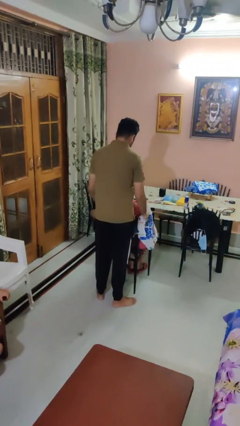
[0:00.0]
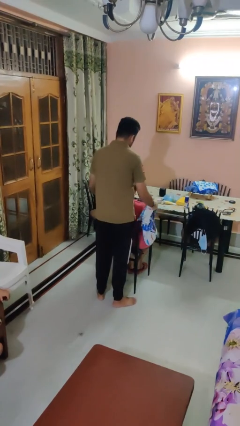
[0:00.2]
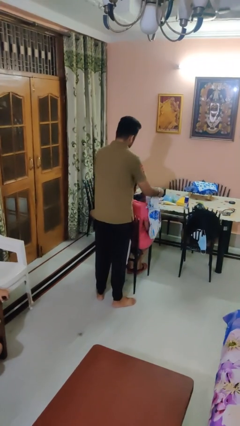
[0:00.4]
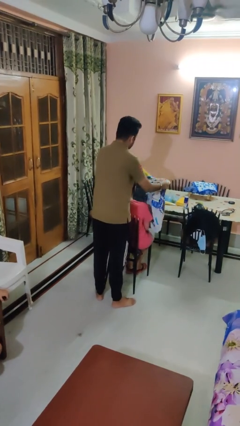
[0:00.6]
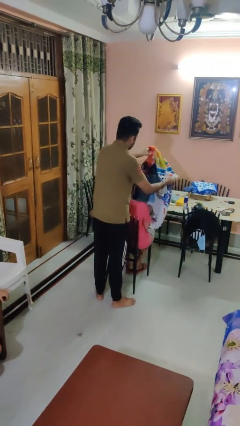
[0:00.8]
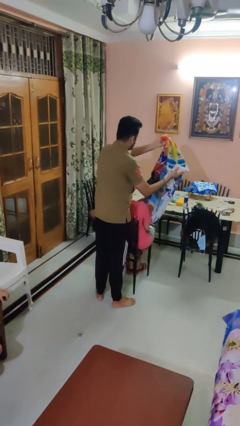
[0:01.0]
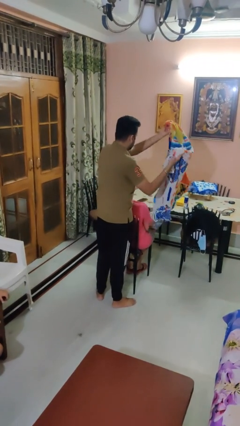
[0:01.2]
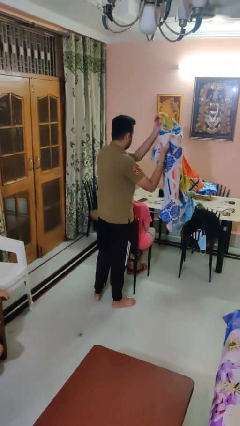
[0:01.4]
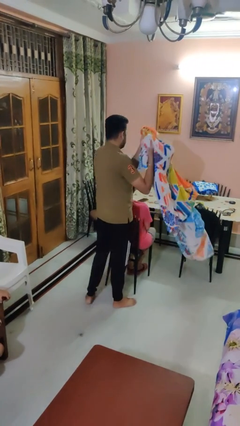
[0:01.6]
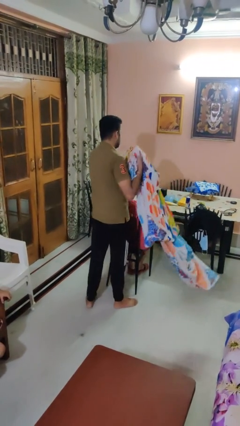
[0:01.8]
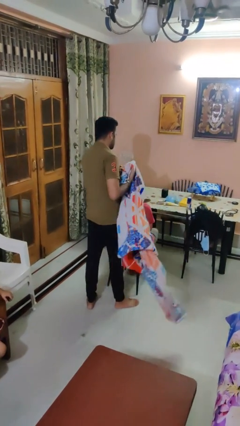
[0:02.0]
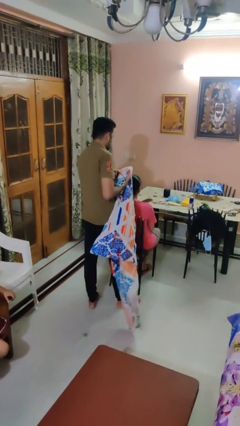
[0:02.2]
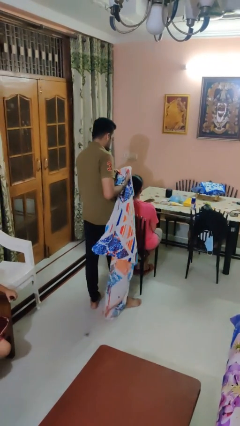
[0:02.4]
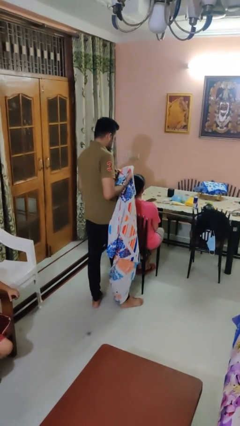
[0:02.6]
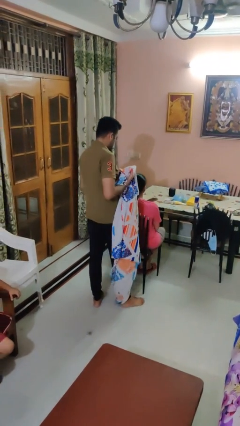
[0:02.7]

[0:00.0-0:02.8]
person uncovers friend with blanket

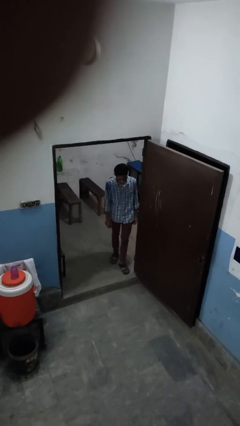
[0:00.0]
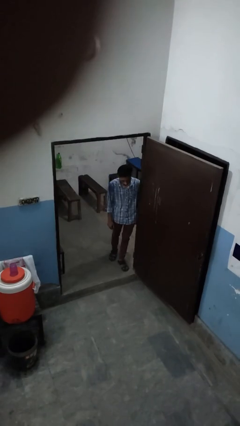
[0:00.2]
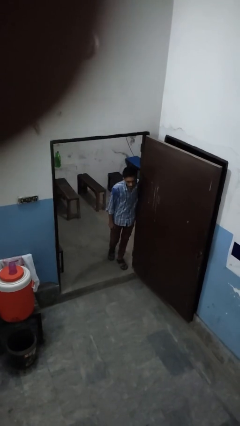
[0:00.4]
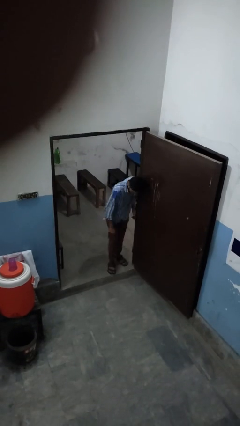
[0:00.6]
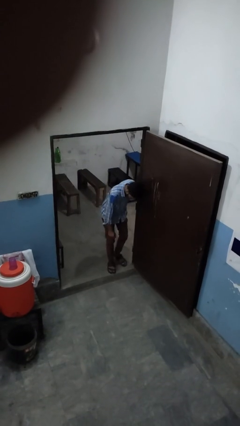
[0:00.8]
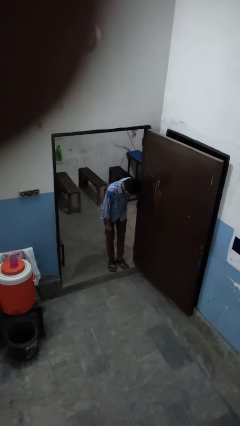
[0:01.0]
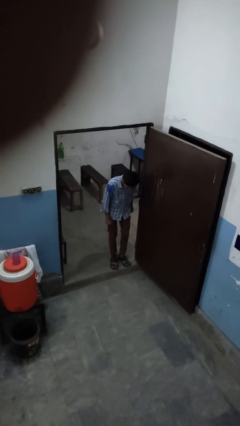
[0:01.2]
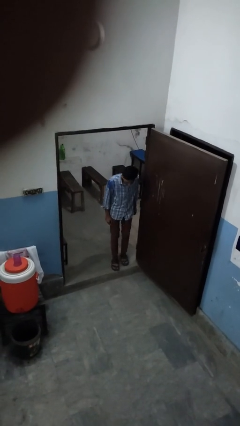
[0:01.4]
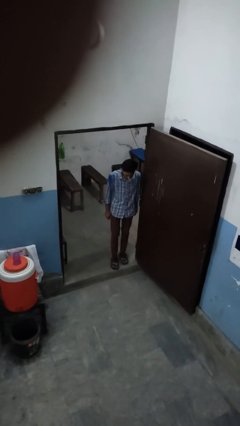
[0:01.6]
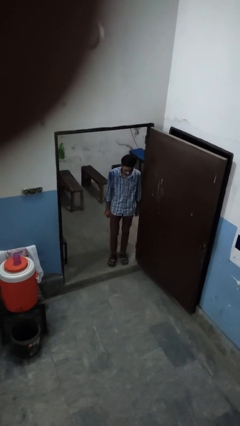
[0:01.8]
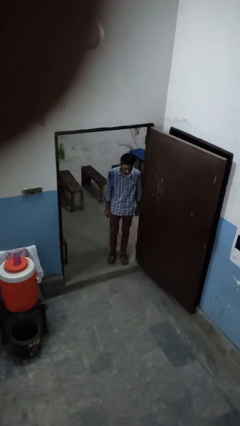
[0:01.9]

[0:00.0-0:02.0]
person bumps into wall

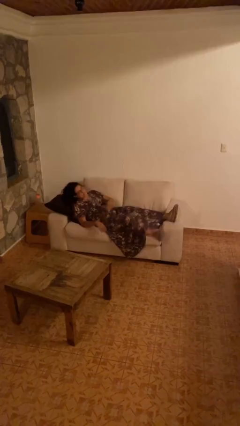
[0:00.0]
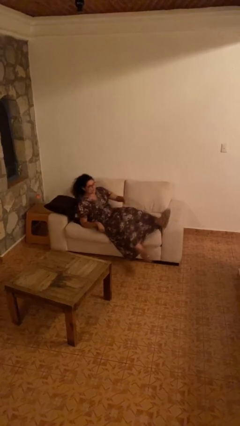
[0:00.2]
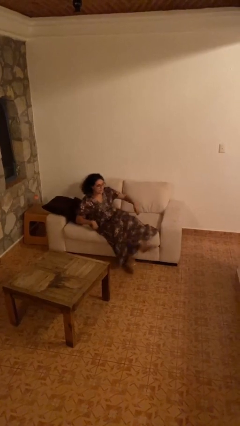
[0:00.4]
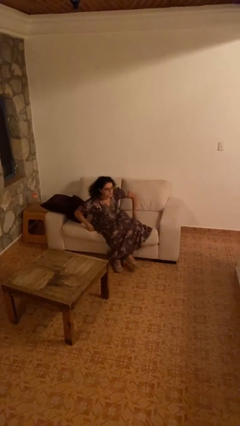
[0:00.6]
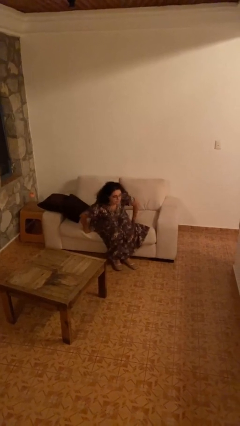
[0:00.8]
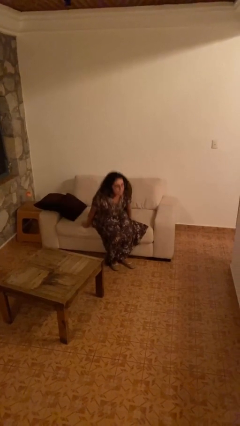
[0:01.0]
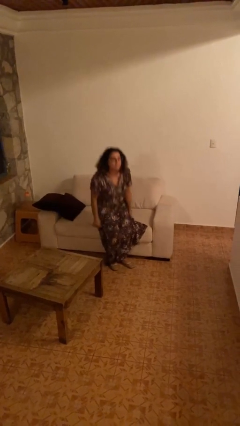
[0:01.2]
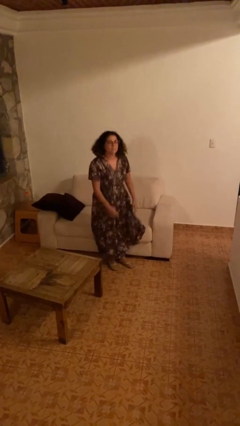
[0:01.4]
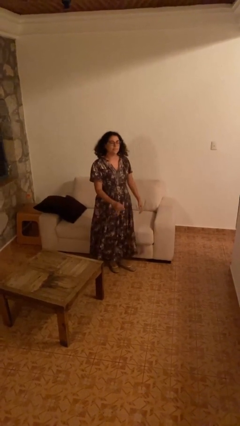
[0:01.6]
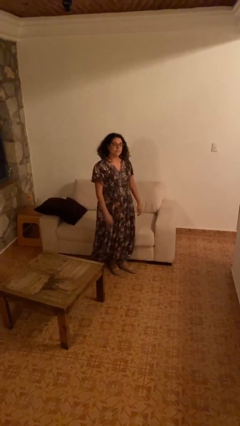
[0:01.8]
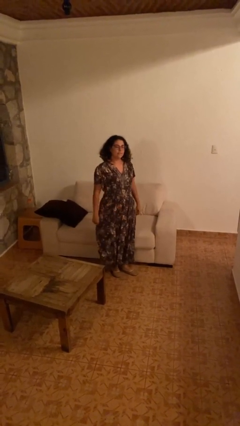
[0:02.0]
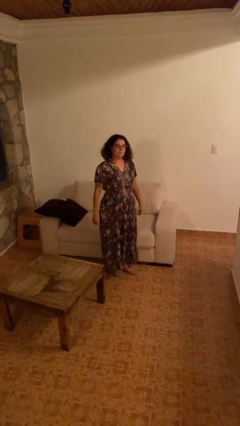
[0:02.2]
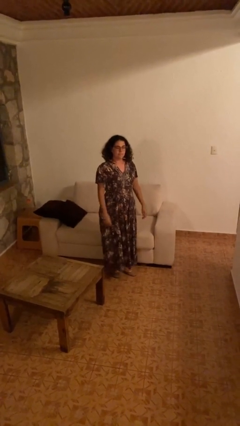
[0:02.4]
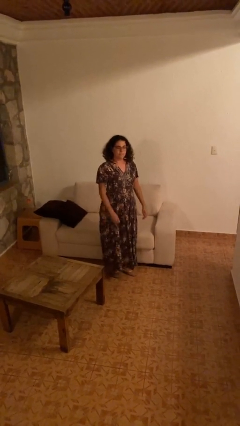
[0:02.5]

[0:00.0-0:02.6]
person stands up

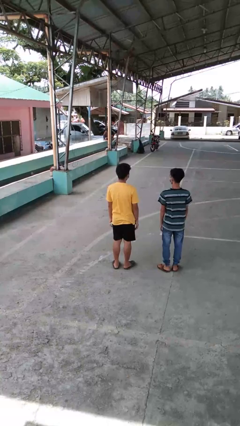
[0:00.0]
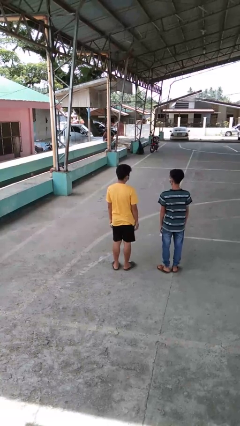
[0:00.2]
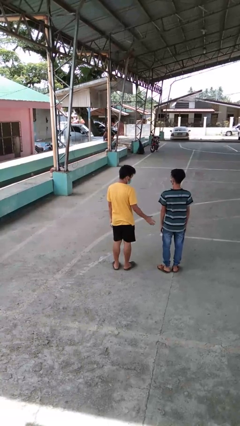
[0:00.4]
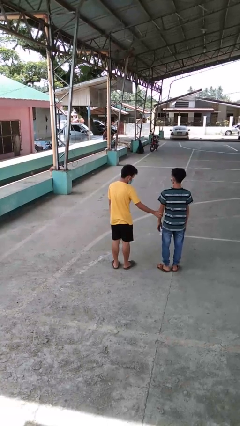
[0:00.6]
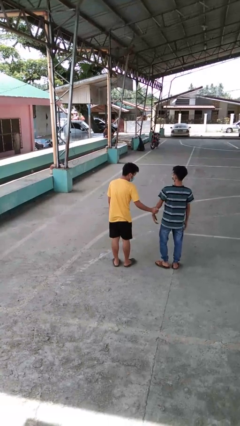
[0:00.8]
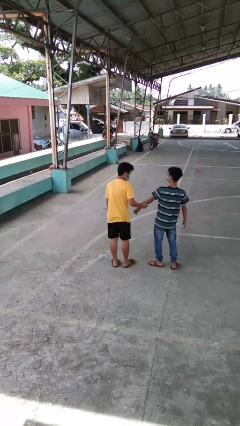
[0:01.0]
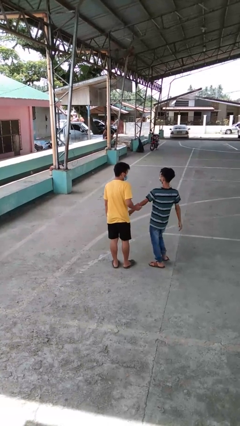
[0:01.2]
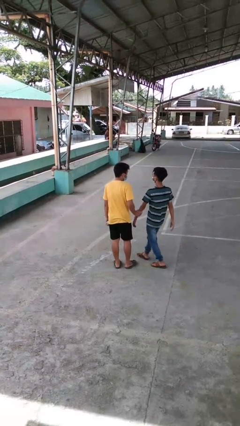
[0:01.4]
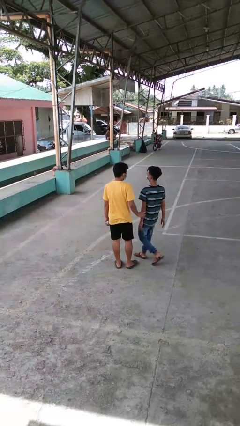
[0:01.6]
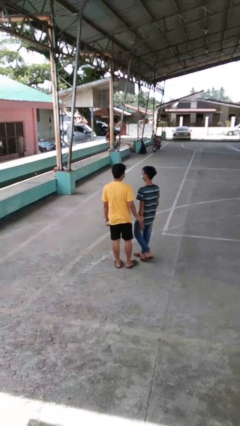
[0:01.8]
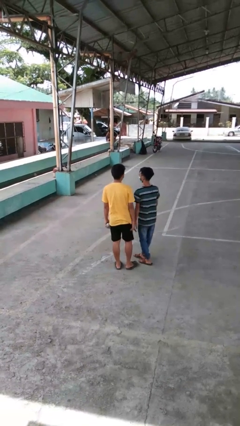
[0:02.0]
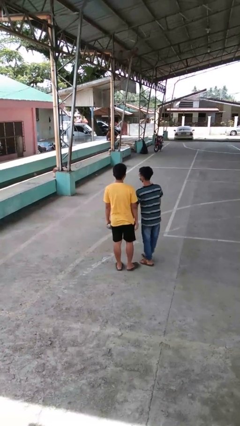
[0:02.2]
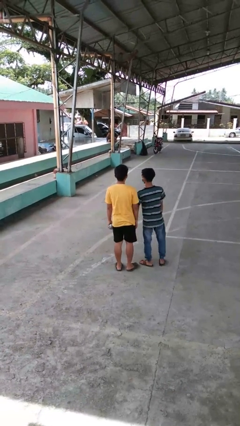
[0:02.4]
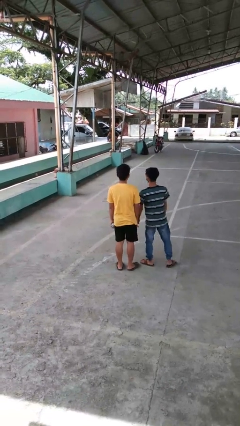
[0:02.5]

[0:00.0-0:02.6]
person grabs person by forearm

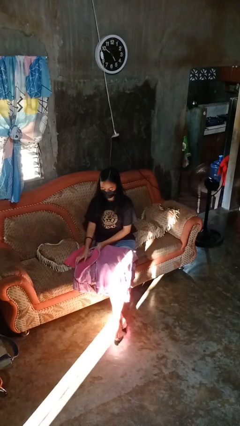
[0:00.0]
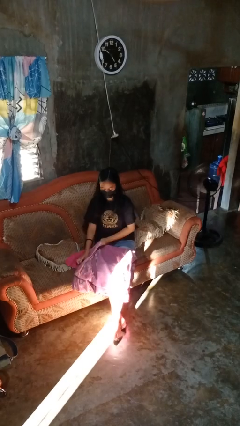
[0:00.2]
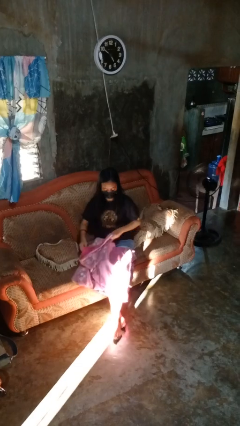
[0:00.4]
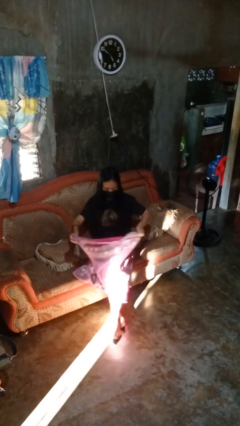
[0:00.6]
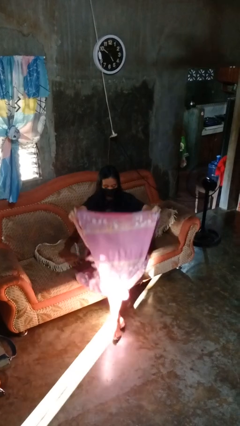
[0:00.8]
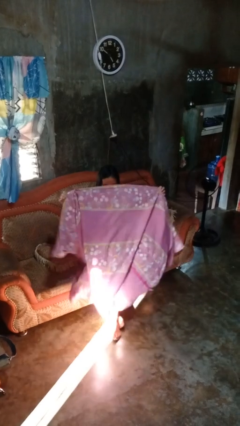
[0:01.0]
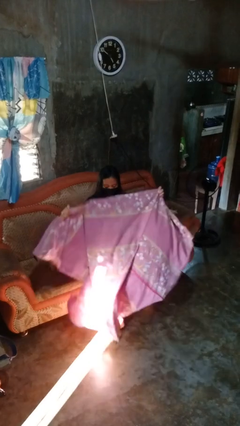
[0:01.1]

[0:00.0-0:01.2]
person unfolds blanket

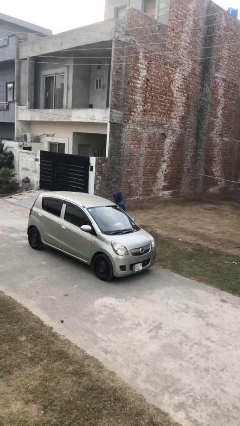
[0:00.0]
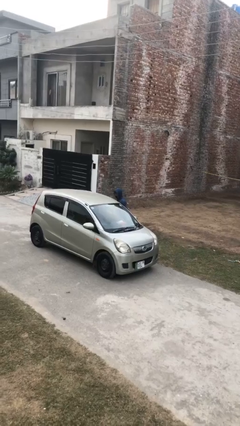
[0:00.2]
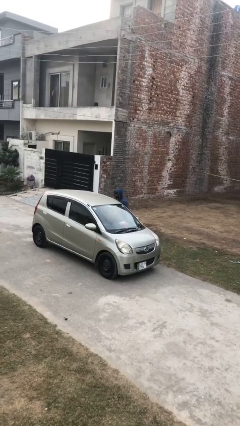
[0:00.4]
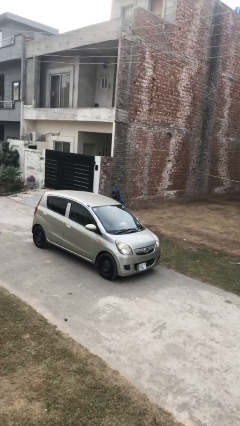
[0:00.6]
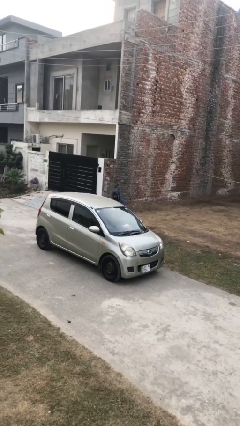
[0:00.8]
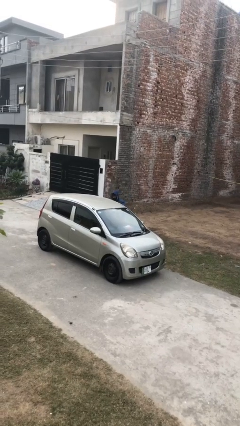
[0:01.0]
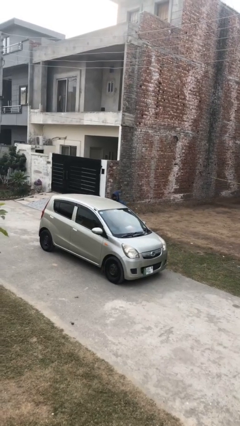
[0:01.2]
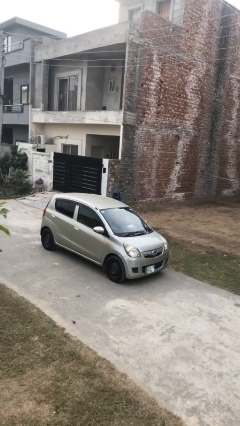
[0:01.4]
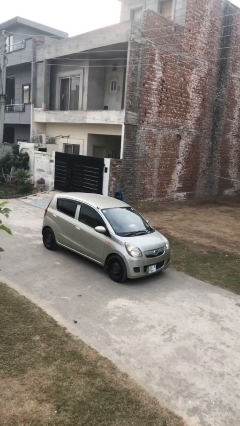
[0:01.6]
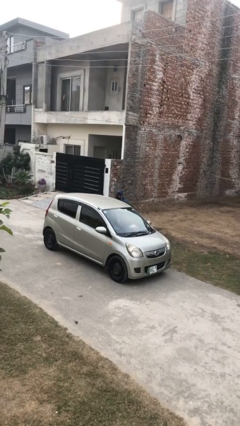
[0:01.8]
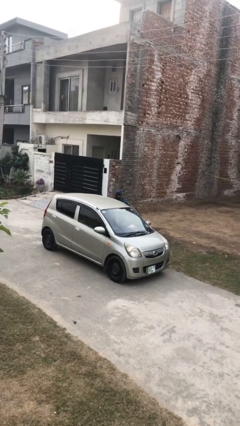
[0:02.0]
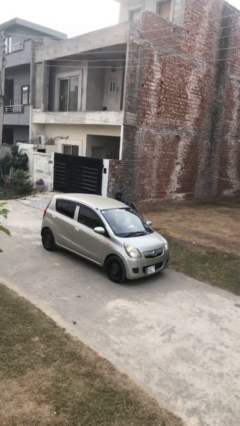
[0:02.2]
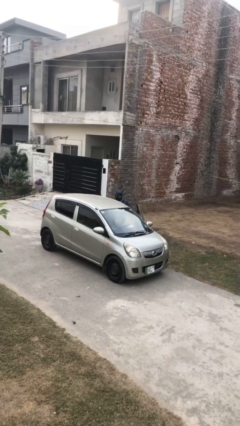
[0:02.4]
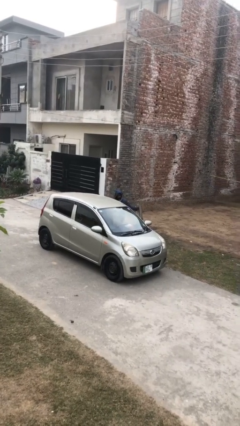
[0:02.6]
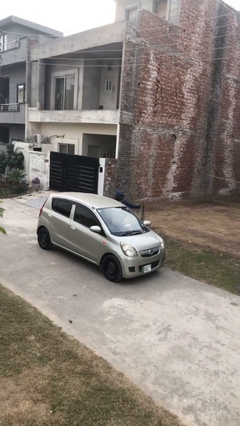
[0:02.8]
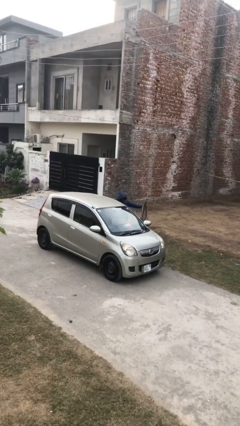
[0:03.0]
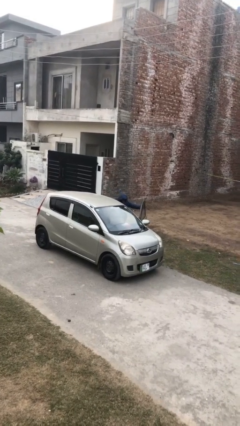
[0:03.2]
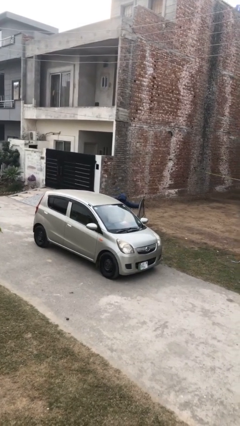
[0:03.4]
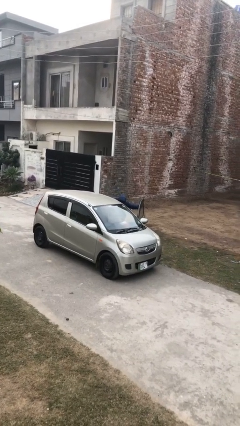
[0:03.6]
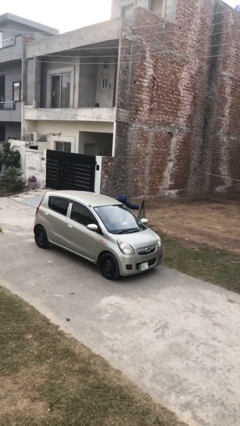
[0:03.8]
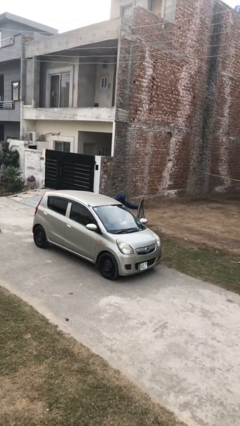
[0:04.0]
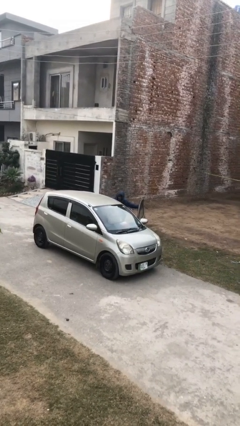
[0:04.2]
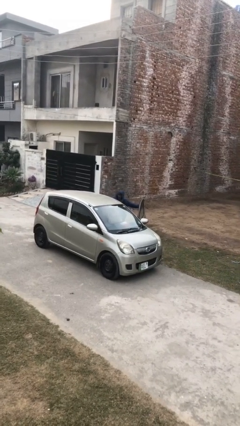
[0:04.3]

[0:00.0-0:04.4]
person opens car door

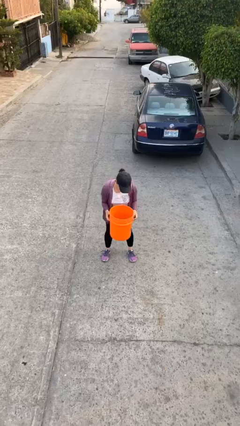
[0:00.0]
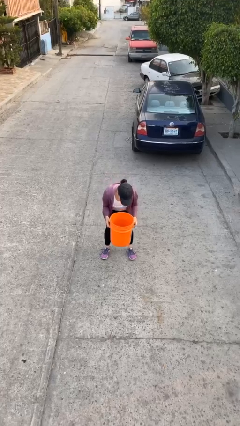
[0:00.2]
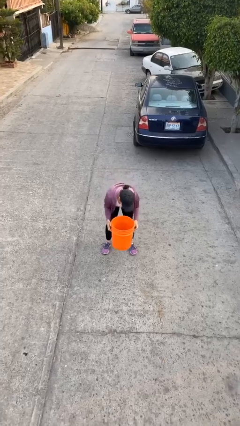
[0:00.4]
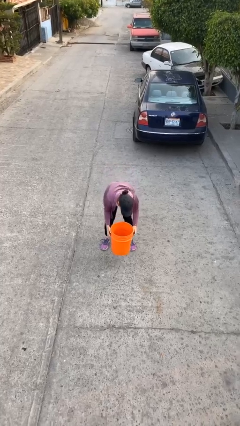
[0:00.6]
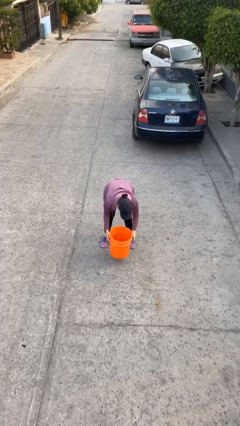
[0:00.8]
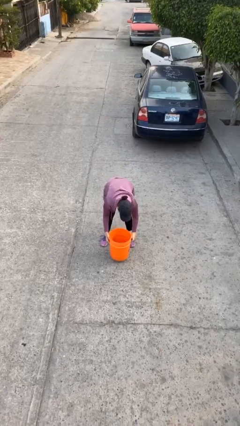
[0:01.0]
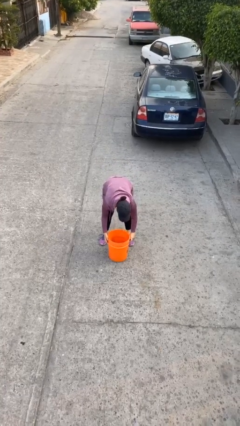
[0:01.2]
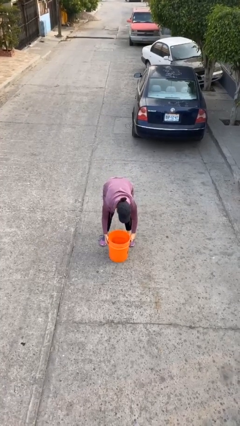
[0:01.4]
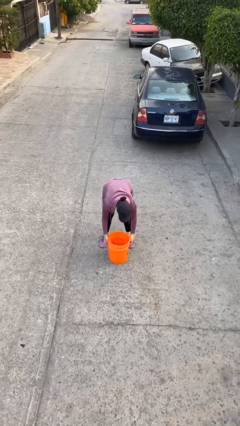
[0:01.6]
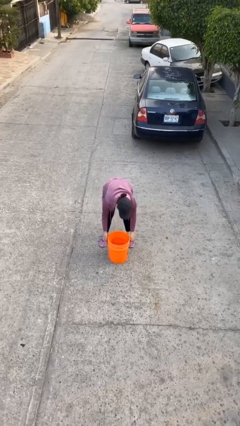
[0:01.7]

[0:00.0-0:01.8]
person puts down object on floor
